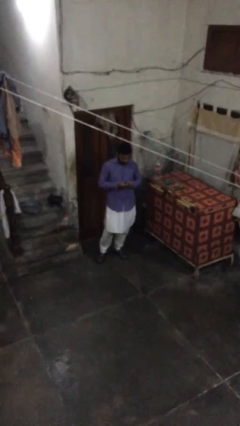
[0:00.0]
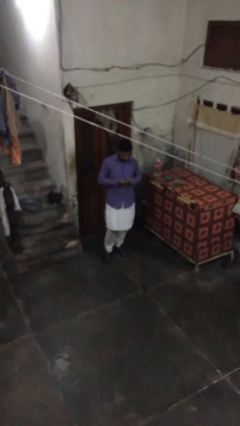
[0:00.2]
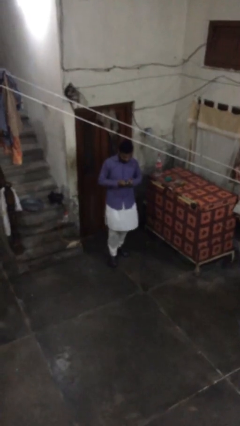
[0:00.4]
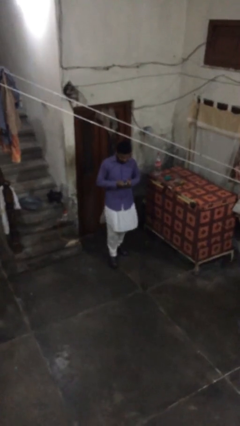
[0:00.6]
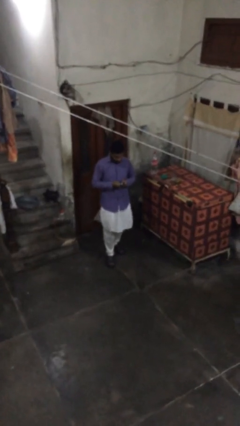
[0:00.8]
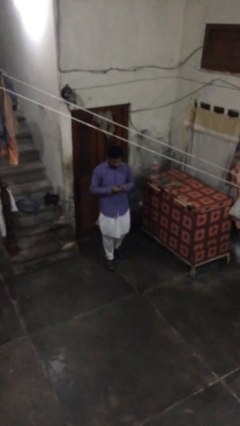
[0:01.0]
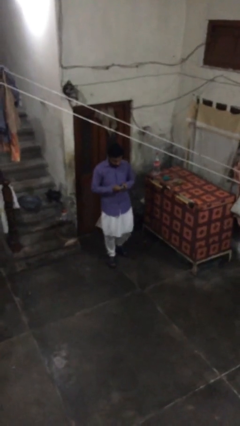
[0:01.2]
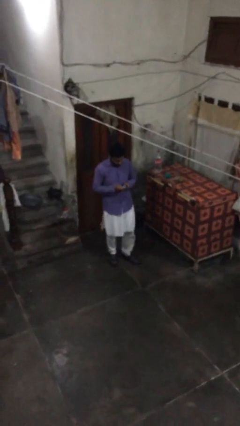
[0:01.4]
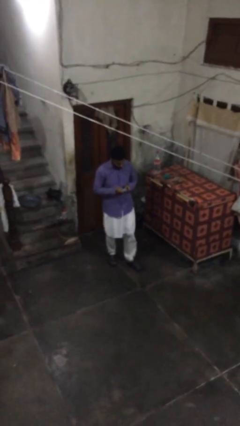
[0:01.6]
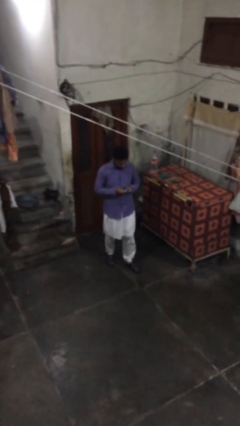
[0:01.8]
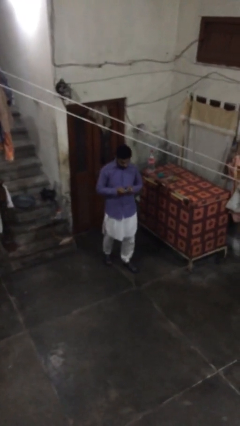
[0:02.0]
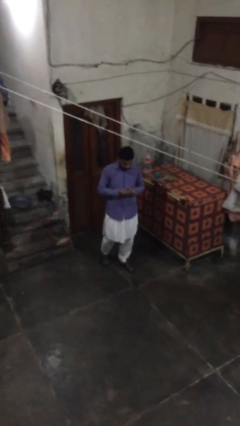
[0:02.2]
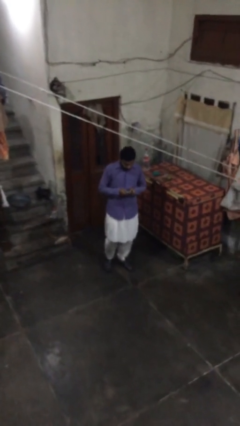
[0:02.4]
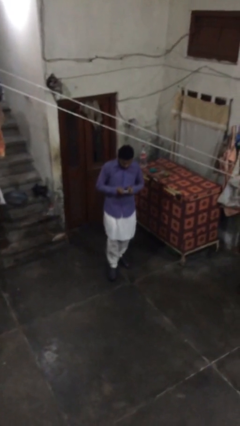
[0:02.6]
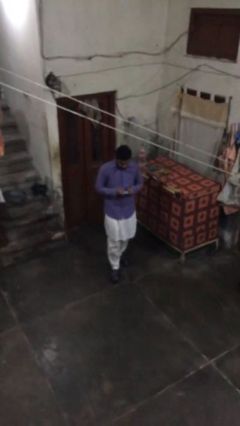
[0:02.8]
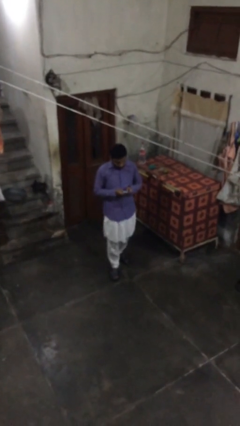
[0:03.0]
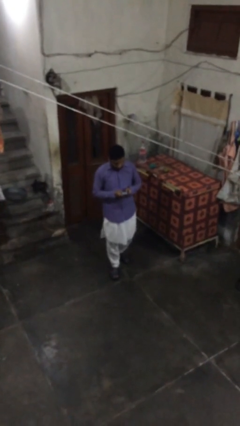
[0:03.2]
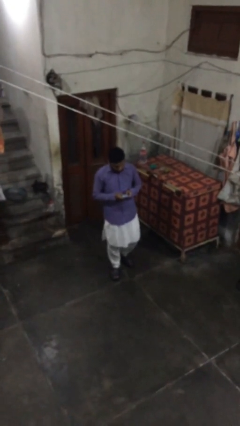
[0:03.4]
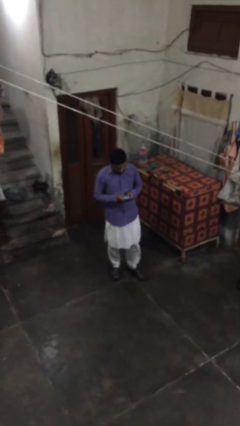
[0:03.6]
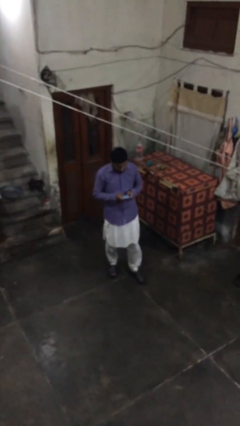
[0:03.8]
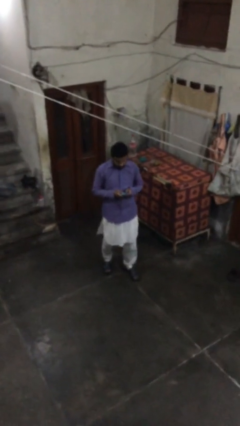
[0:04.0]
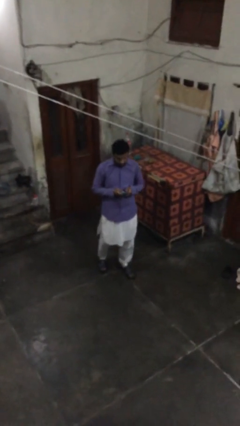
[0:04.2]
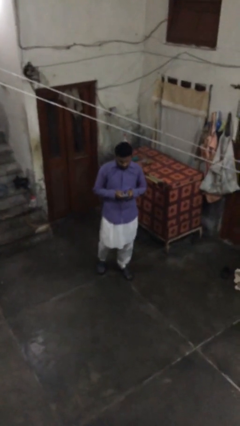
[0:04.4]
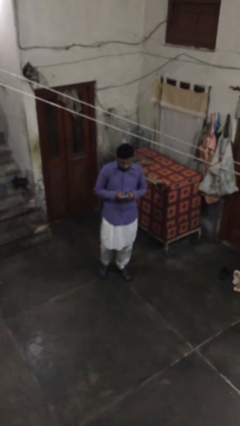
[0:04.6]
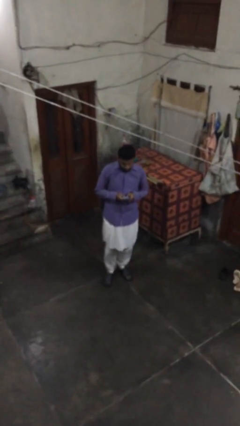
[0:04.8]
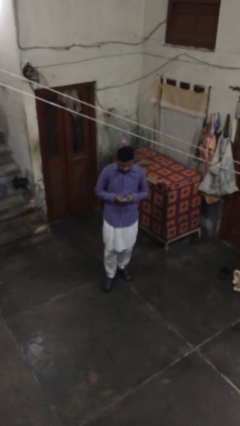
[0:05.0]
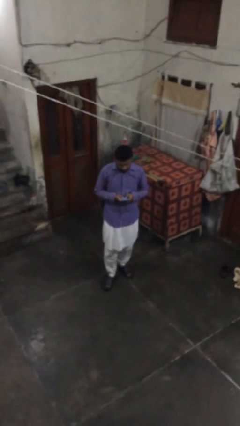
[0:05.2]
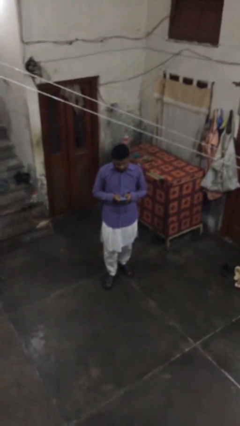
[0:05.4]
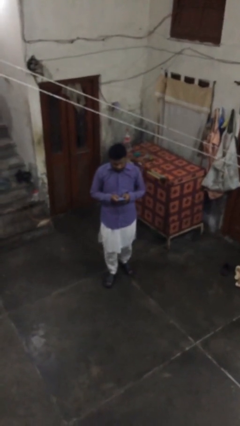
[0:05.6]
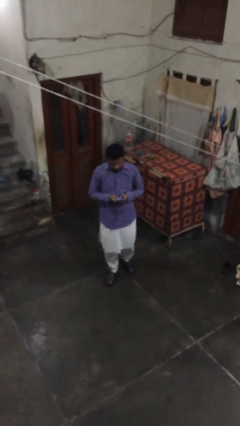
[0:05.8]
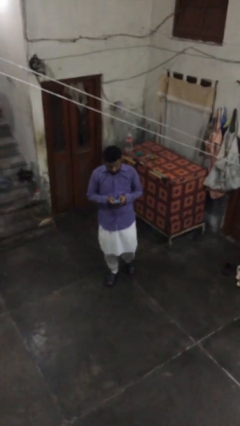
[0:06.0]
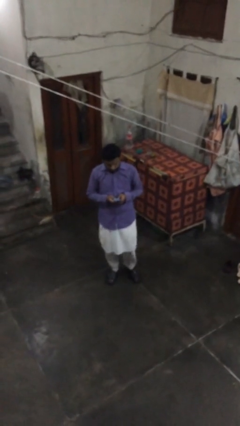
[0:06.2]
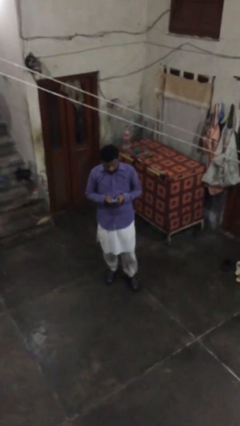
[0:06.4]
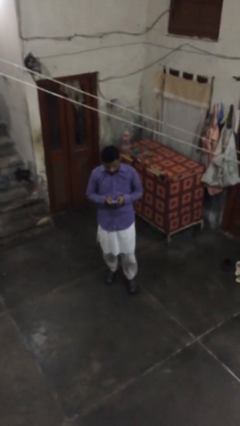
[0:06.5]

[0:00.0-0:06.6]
person texts on phone

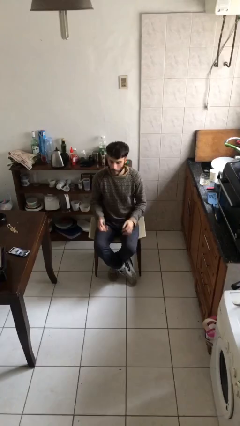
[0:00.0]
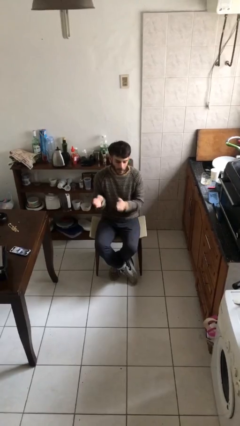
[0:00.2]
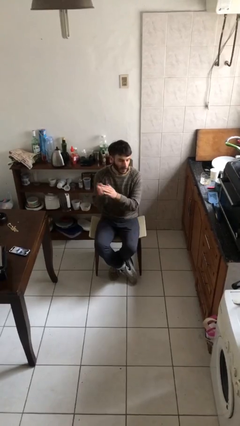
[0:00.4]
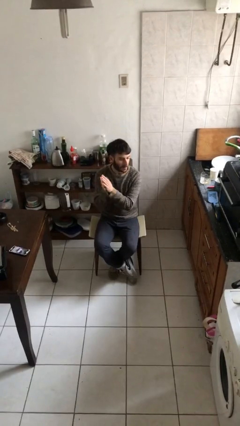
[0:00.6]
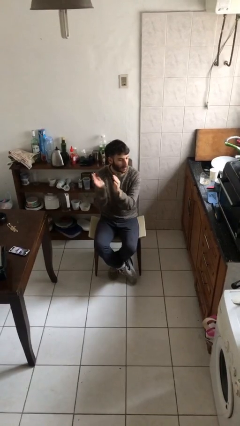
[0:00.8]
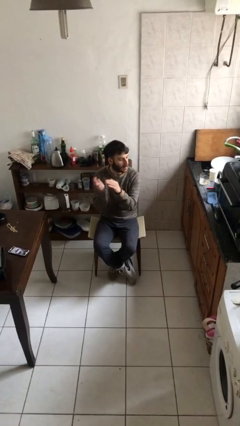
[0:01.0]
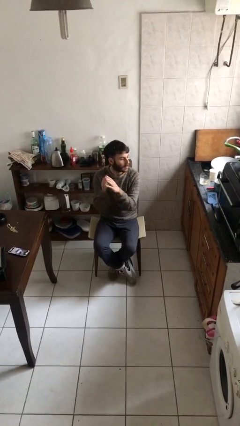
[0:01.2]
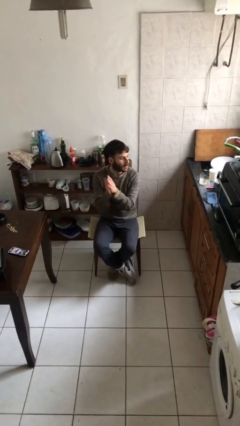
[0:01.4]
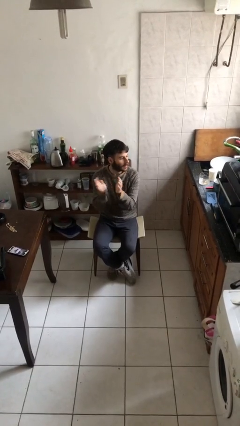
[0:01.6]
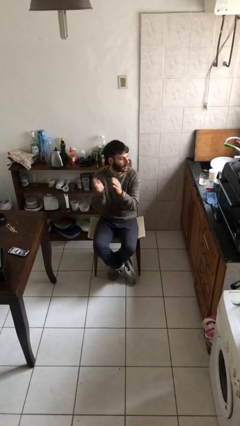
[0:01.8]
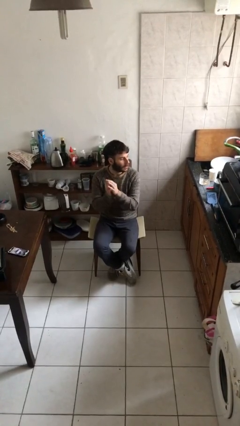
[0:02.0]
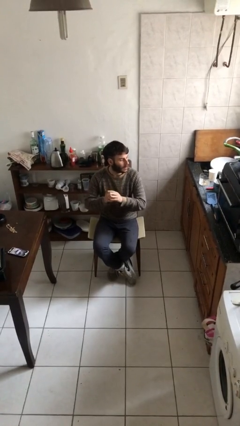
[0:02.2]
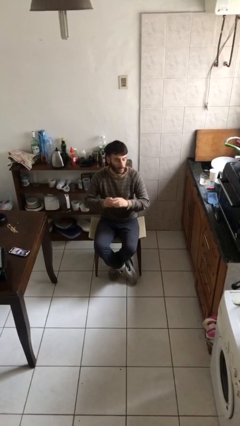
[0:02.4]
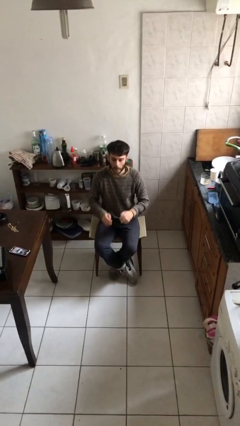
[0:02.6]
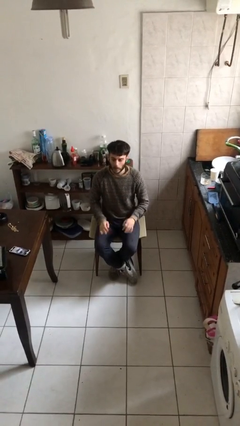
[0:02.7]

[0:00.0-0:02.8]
person claps hands

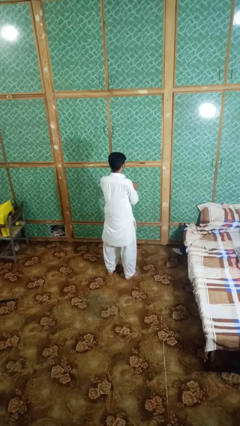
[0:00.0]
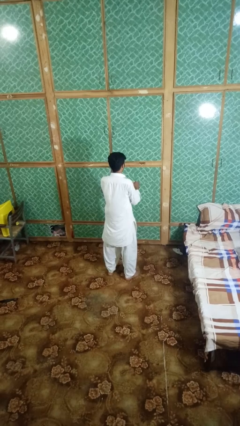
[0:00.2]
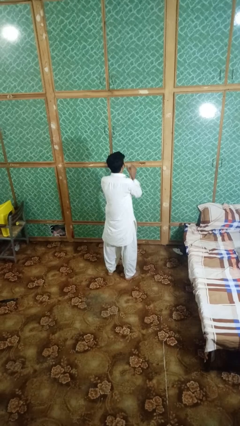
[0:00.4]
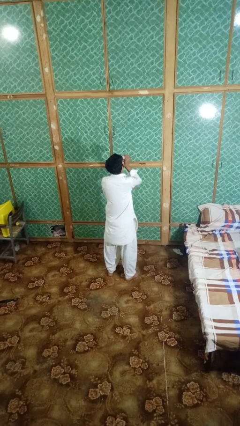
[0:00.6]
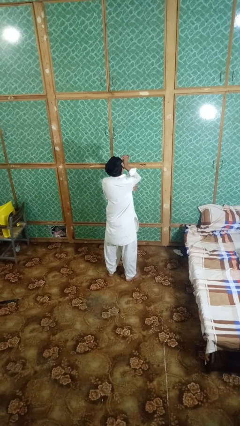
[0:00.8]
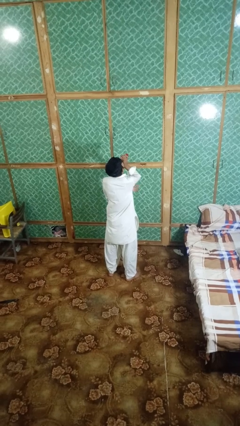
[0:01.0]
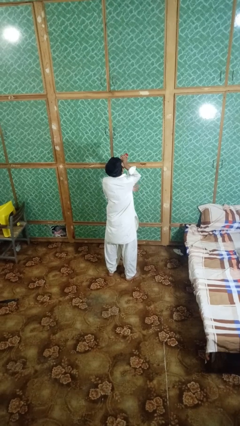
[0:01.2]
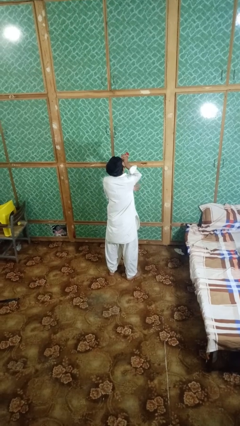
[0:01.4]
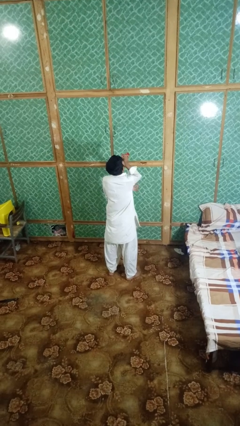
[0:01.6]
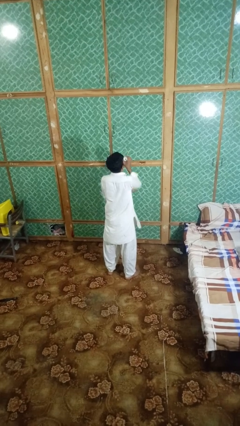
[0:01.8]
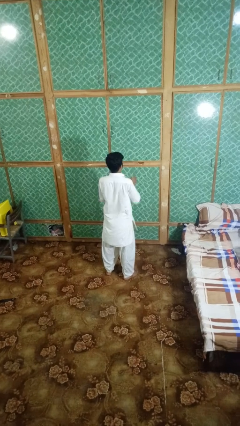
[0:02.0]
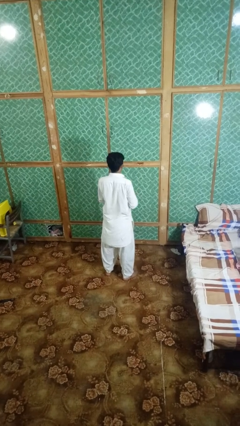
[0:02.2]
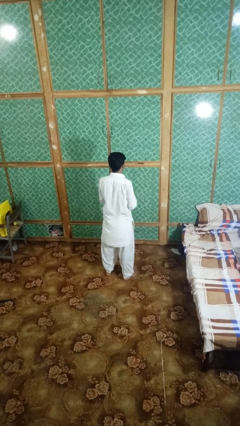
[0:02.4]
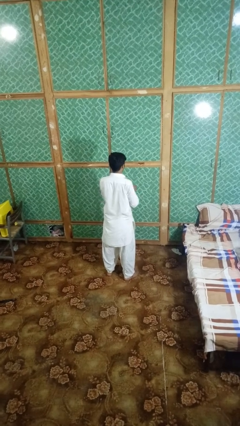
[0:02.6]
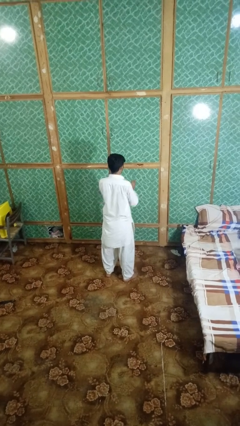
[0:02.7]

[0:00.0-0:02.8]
person drinks from beverage can

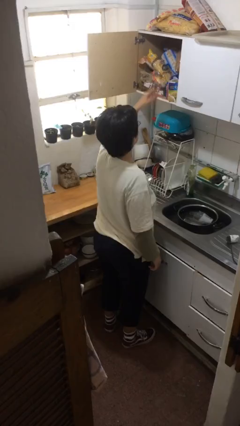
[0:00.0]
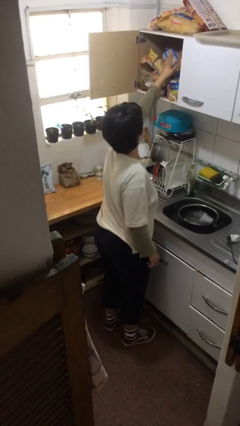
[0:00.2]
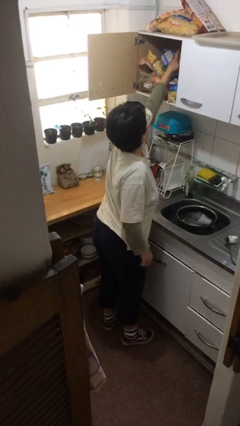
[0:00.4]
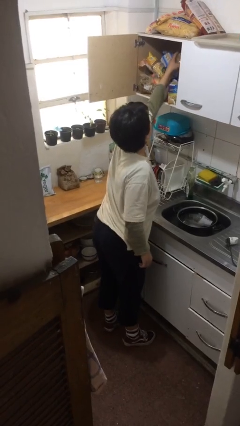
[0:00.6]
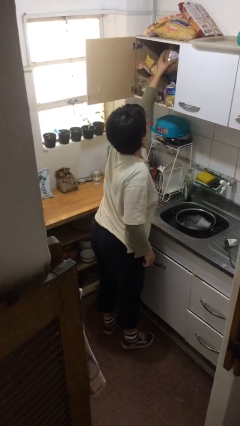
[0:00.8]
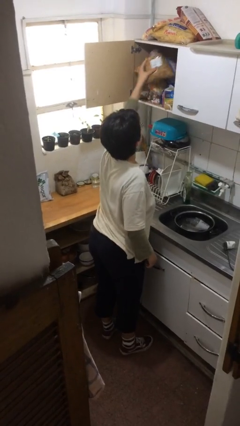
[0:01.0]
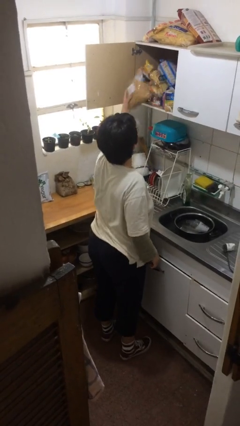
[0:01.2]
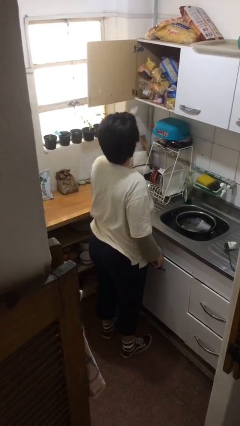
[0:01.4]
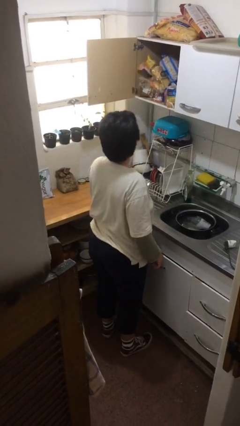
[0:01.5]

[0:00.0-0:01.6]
person takes object from cabinet

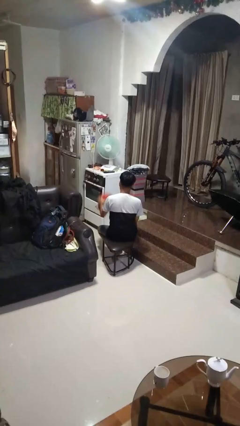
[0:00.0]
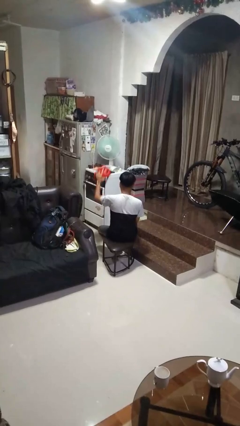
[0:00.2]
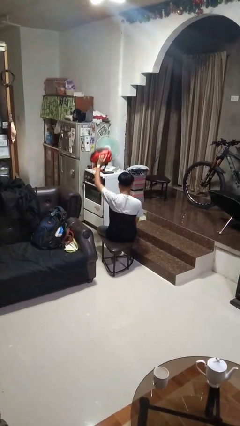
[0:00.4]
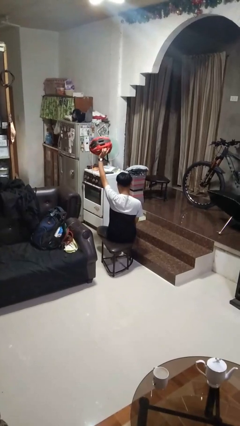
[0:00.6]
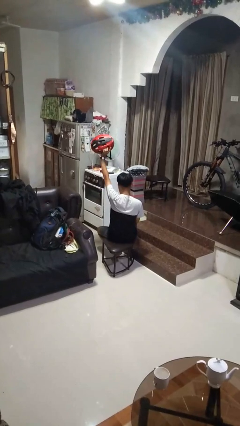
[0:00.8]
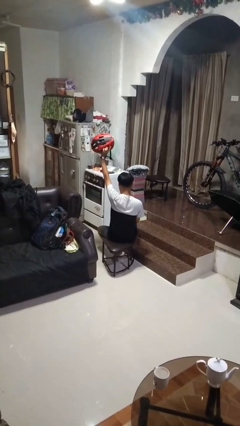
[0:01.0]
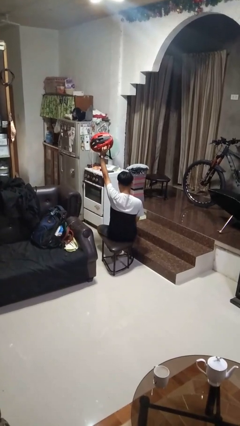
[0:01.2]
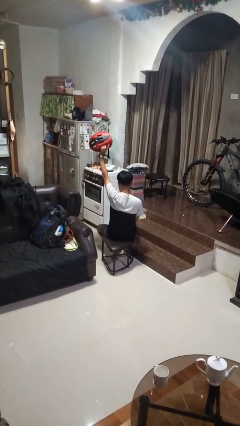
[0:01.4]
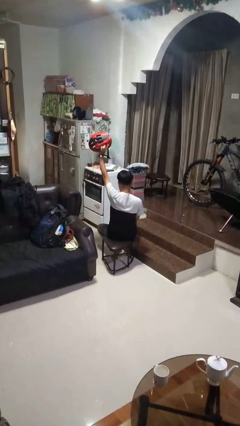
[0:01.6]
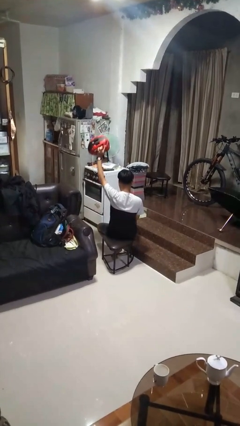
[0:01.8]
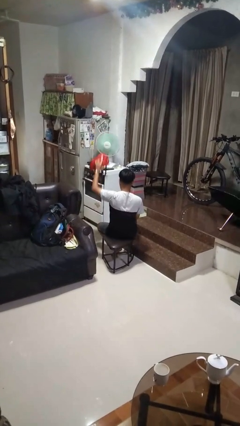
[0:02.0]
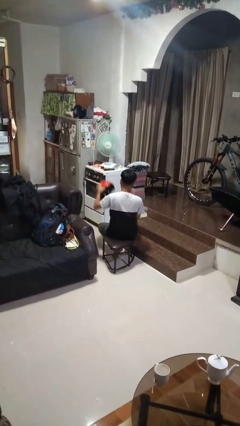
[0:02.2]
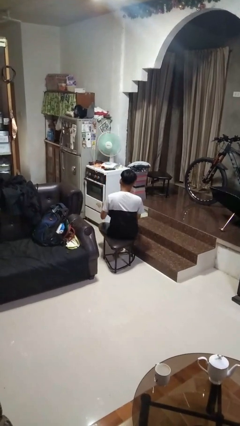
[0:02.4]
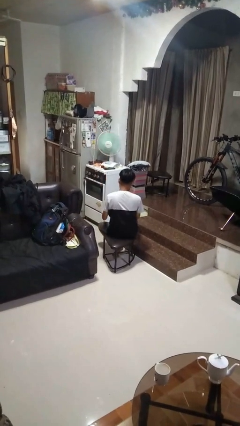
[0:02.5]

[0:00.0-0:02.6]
person holds object above head

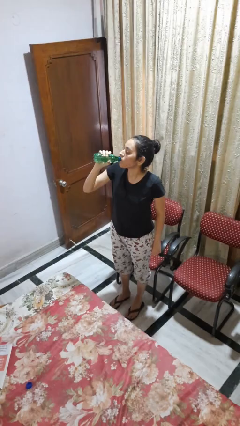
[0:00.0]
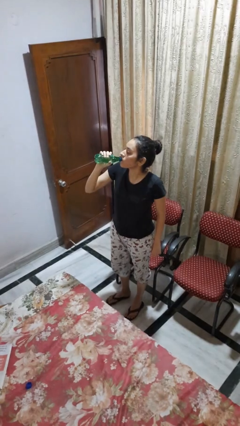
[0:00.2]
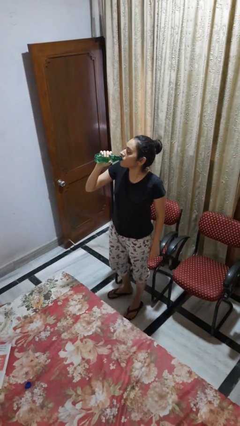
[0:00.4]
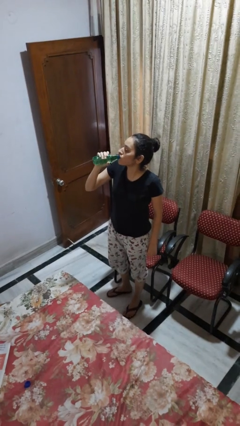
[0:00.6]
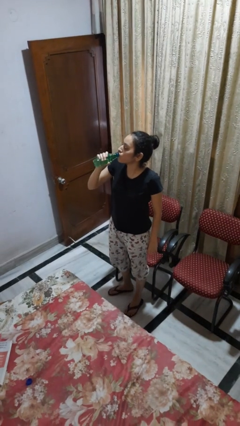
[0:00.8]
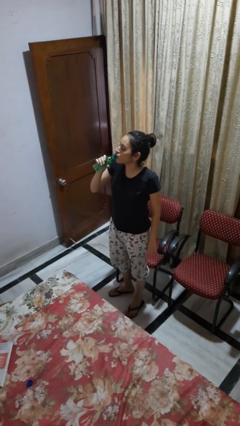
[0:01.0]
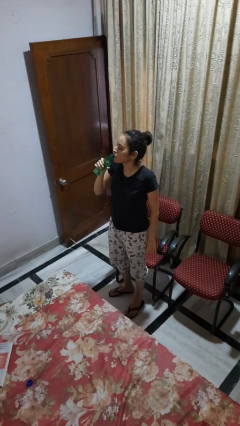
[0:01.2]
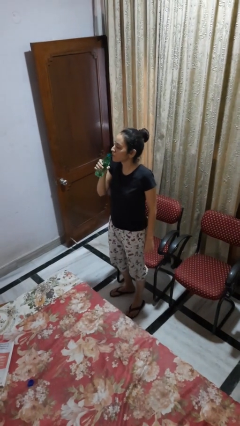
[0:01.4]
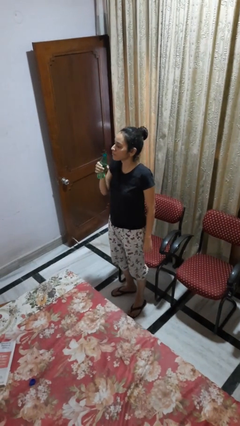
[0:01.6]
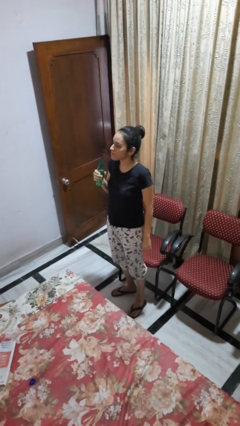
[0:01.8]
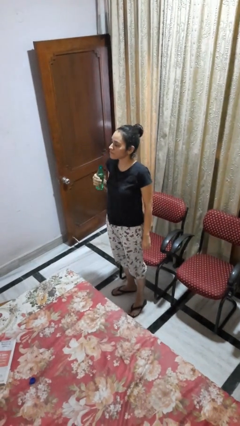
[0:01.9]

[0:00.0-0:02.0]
person drinks from bottle
